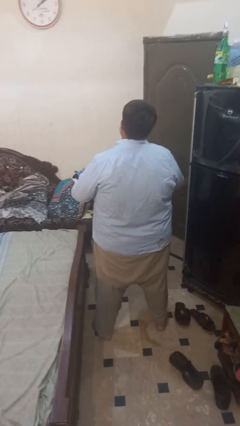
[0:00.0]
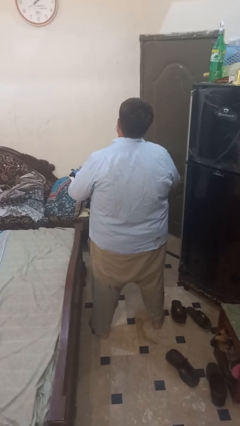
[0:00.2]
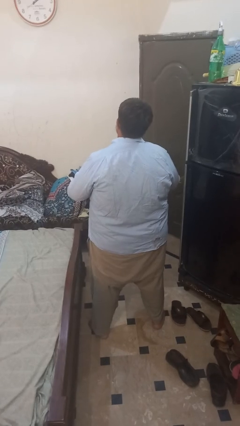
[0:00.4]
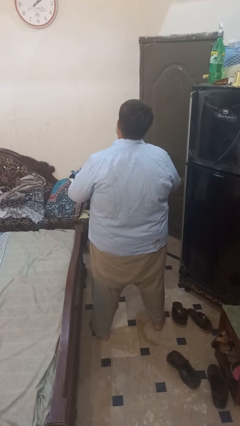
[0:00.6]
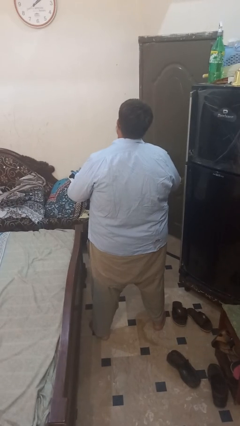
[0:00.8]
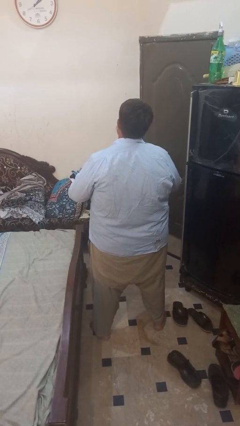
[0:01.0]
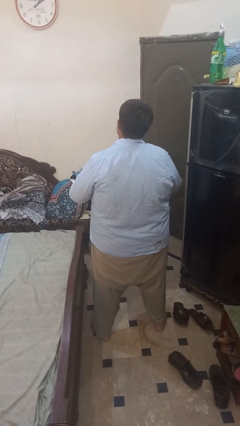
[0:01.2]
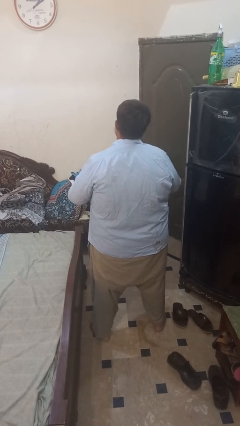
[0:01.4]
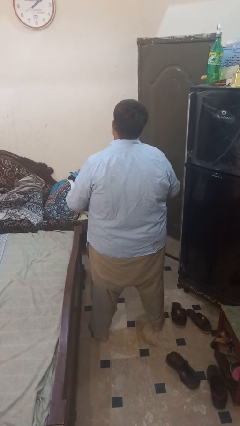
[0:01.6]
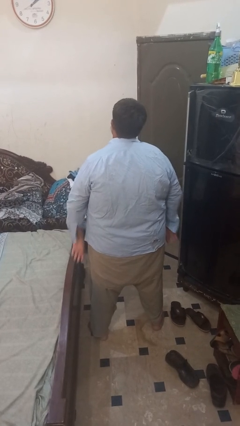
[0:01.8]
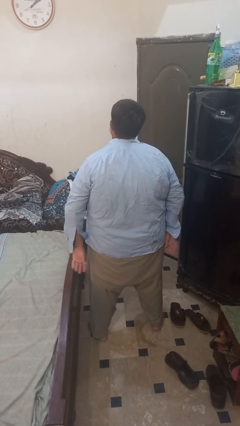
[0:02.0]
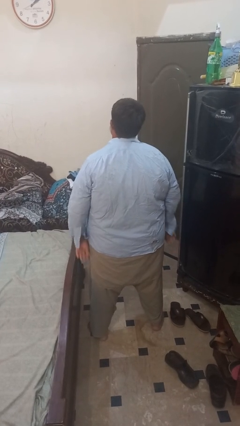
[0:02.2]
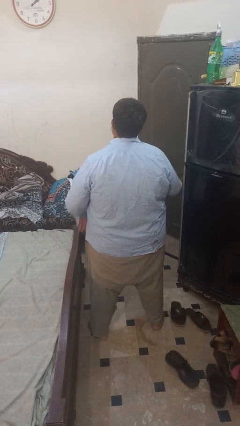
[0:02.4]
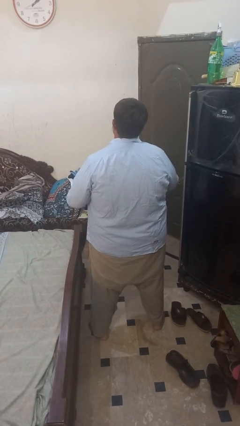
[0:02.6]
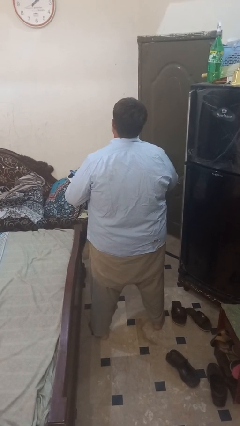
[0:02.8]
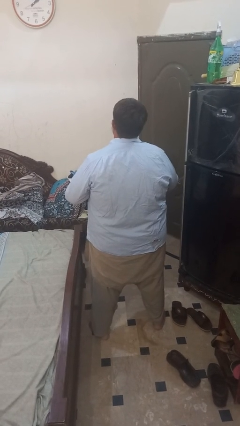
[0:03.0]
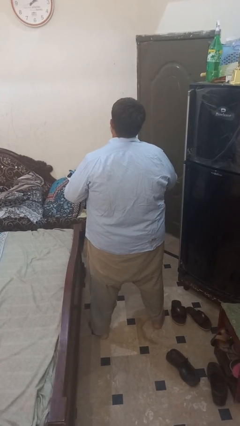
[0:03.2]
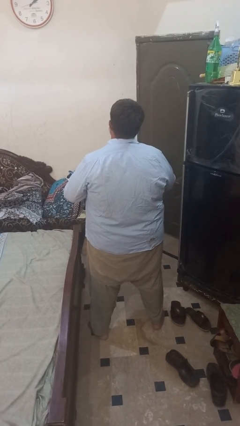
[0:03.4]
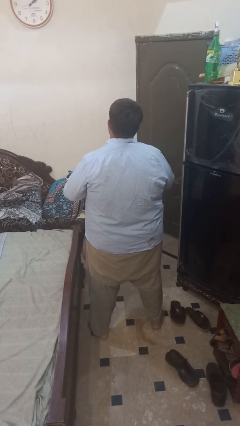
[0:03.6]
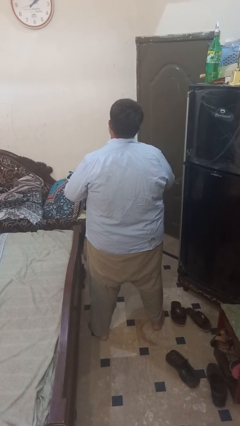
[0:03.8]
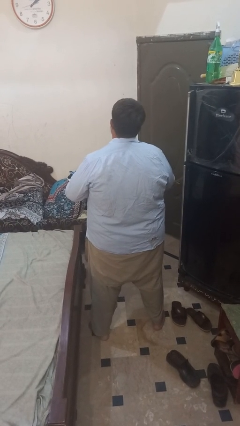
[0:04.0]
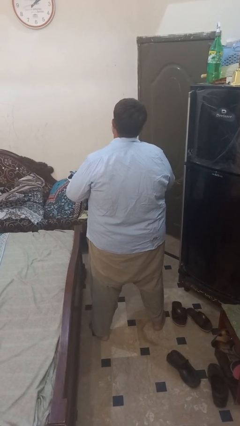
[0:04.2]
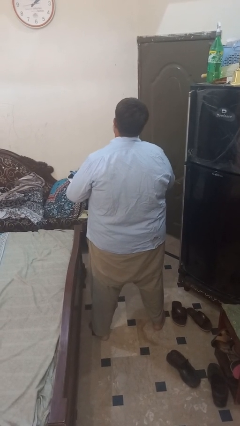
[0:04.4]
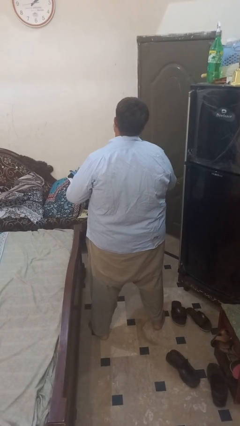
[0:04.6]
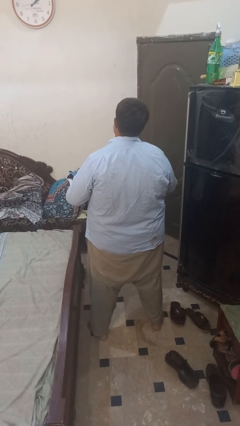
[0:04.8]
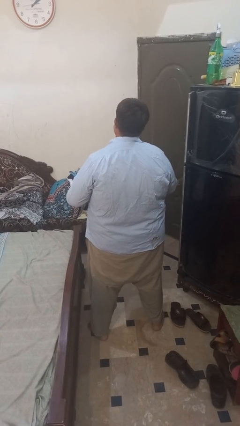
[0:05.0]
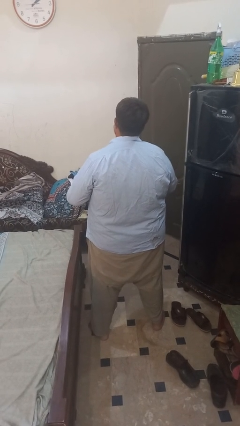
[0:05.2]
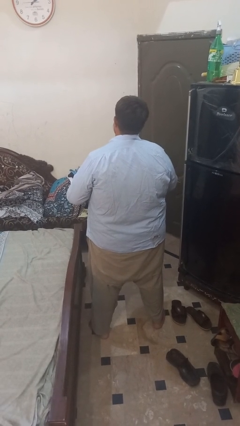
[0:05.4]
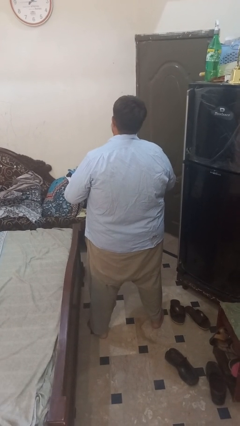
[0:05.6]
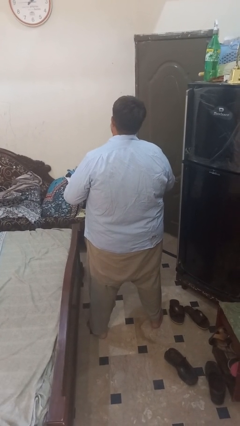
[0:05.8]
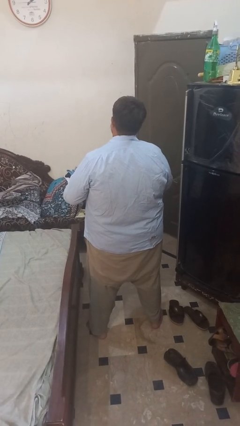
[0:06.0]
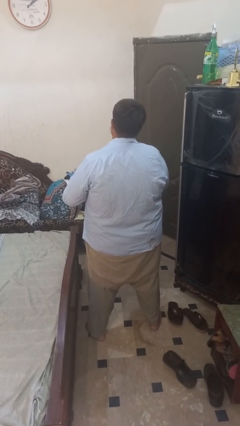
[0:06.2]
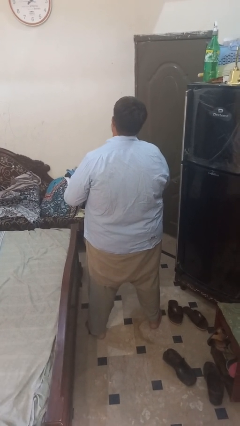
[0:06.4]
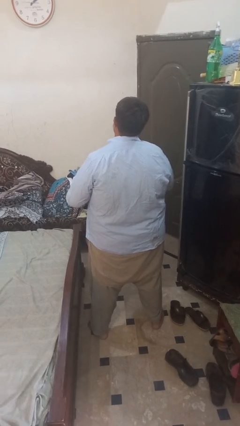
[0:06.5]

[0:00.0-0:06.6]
person unbuttons shirt

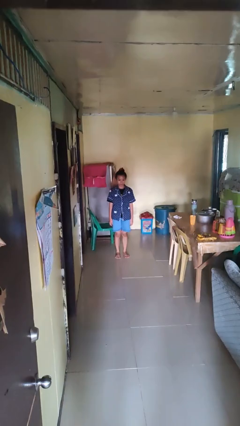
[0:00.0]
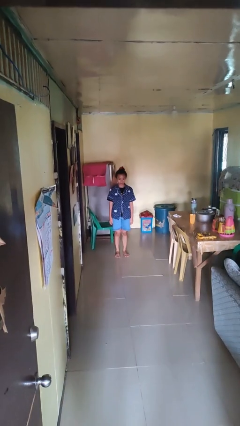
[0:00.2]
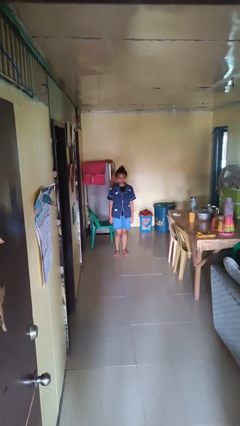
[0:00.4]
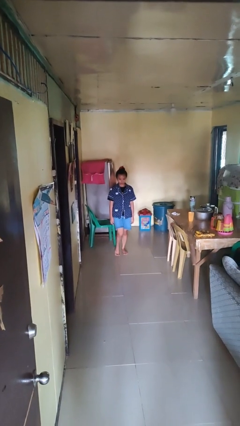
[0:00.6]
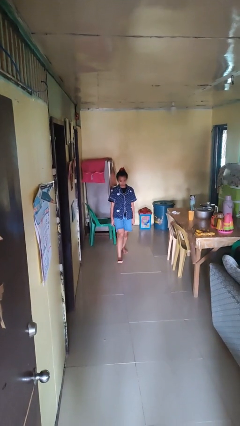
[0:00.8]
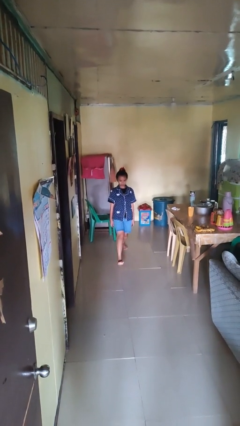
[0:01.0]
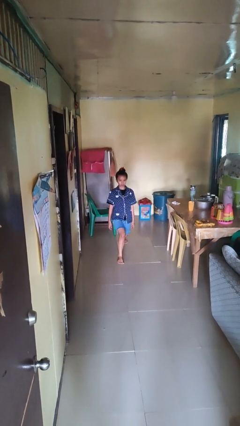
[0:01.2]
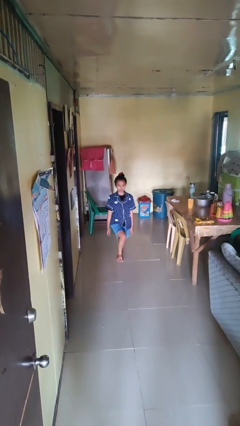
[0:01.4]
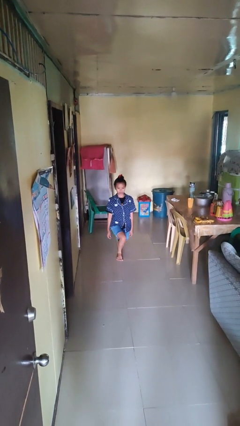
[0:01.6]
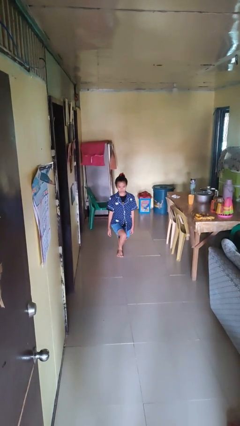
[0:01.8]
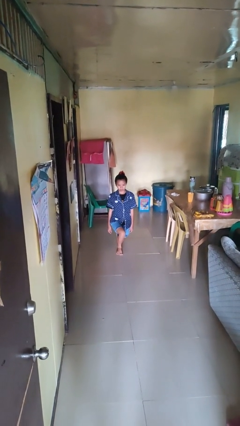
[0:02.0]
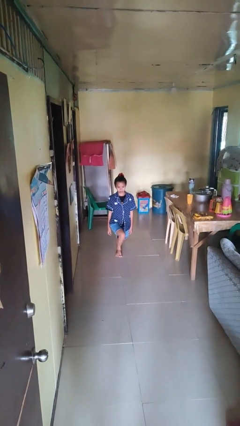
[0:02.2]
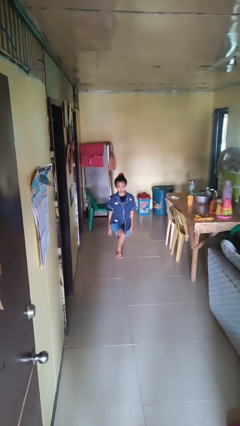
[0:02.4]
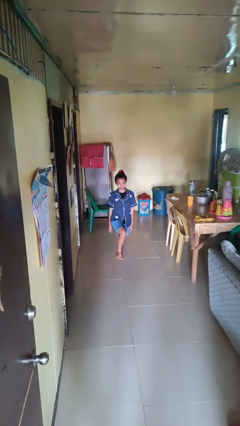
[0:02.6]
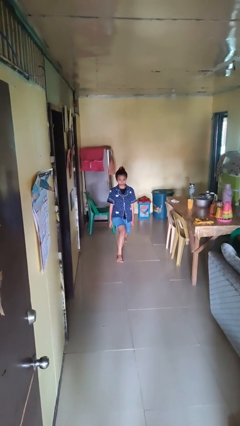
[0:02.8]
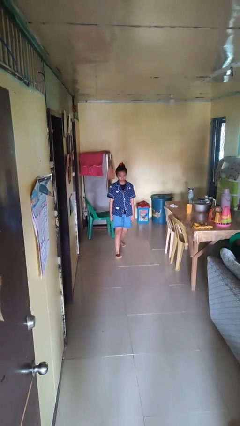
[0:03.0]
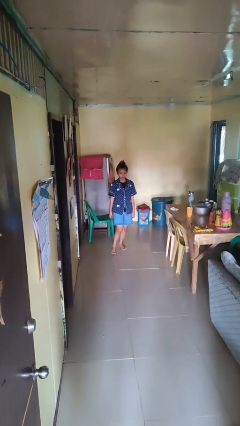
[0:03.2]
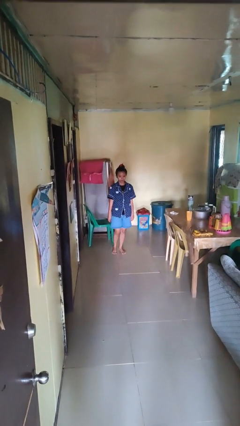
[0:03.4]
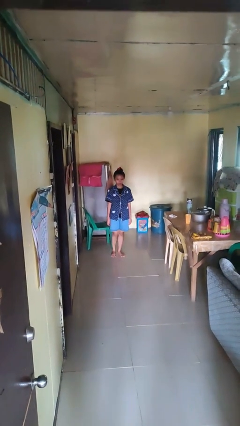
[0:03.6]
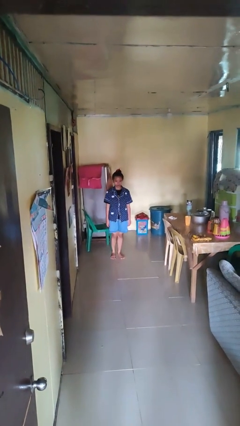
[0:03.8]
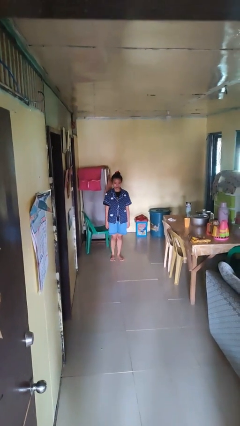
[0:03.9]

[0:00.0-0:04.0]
person exercises with lunges

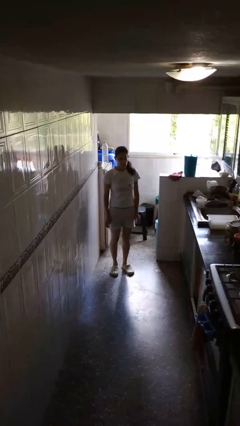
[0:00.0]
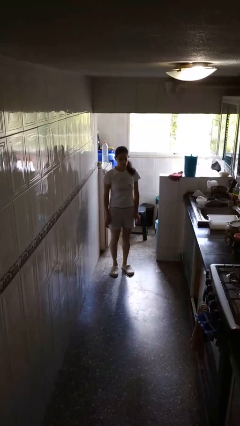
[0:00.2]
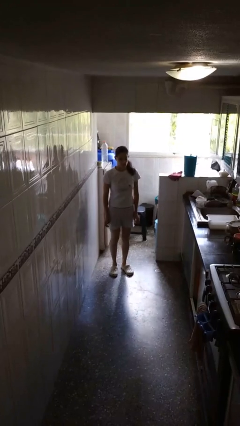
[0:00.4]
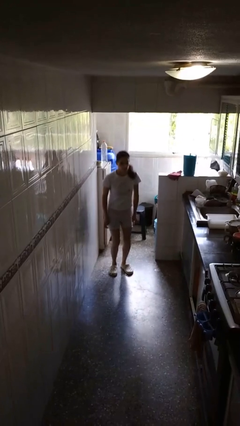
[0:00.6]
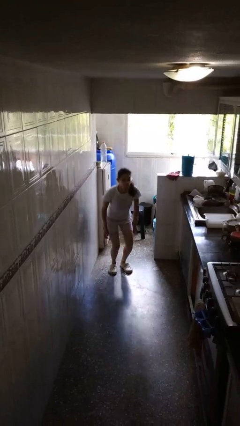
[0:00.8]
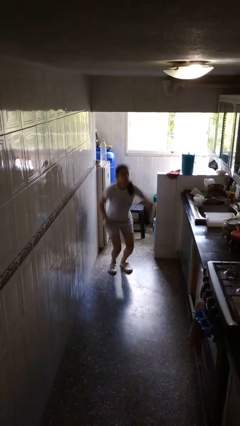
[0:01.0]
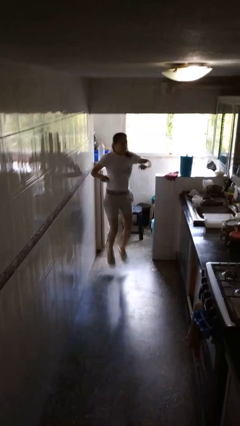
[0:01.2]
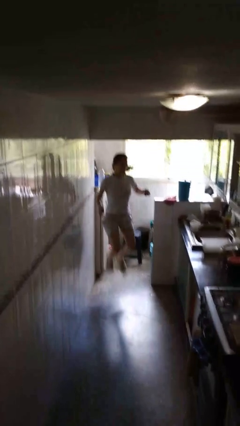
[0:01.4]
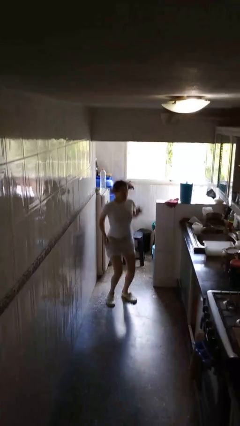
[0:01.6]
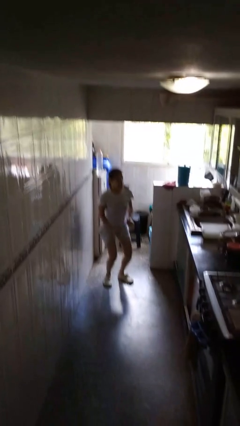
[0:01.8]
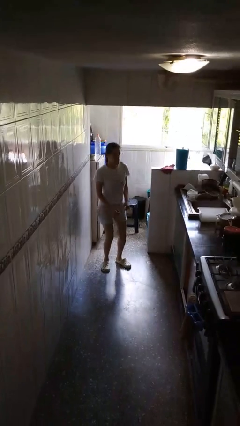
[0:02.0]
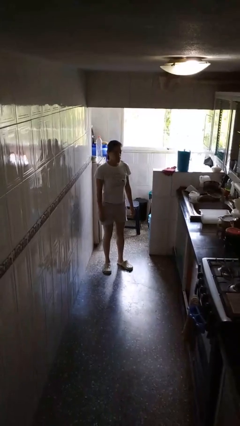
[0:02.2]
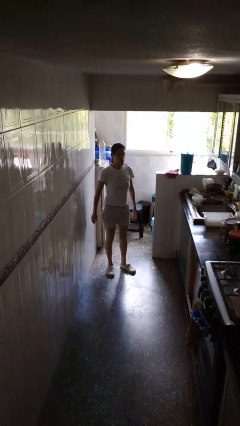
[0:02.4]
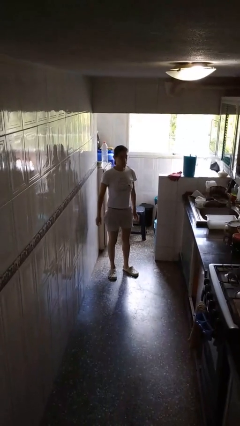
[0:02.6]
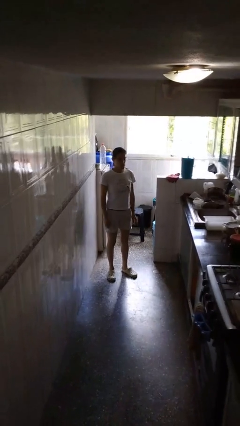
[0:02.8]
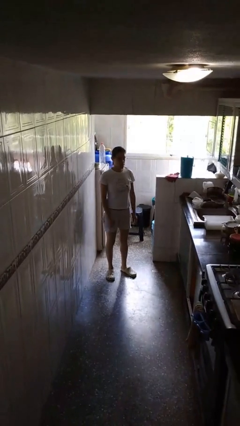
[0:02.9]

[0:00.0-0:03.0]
person jumps

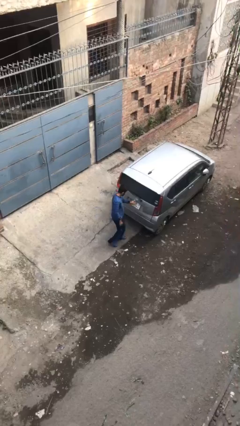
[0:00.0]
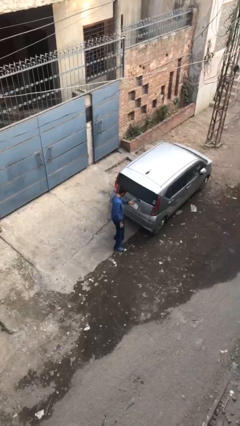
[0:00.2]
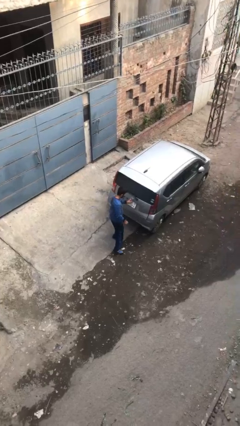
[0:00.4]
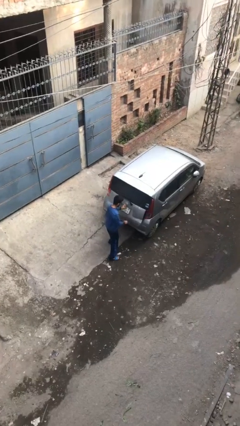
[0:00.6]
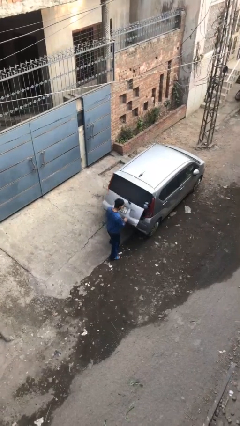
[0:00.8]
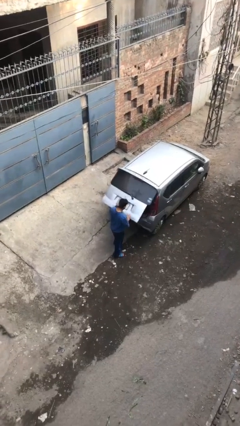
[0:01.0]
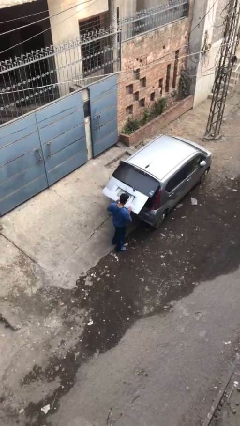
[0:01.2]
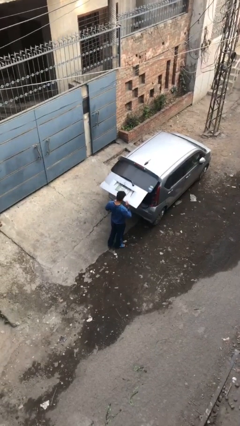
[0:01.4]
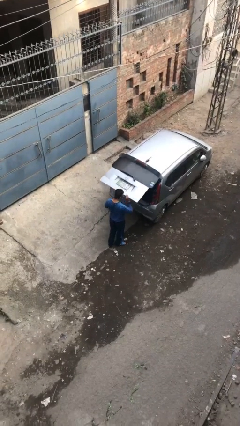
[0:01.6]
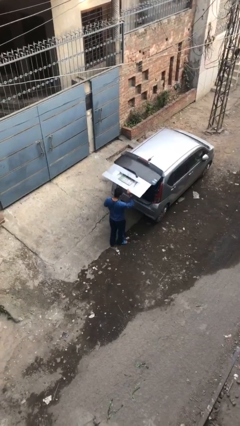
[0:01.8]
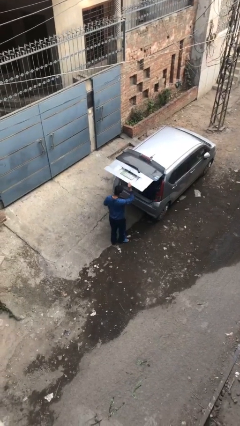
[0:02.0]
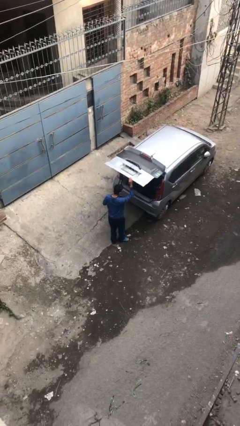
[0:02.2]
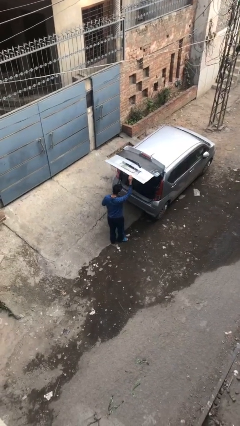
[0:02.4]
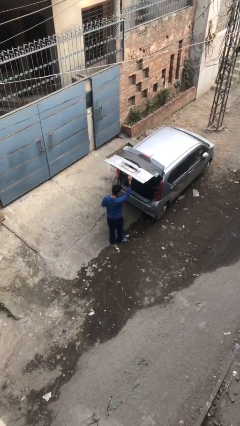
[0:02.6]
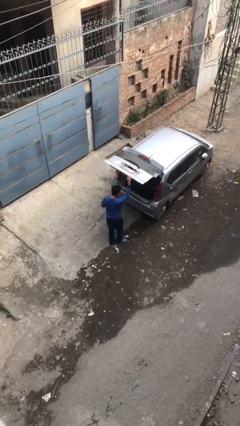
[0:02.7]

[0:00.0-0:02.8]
person opens car trunk

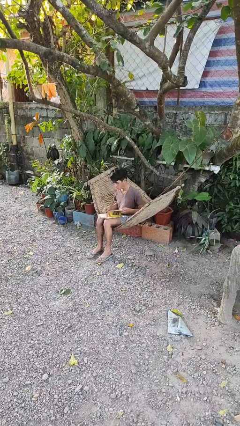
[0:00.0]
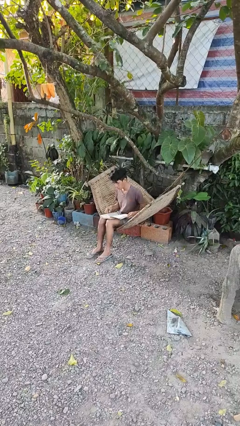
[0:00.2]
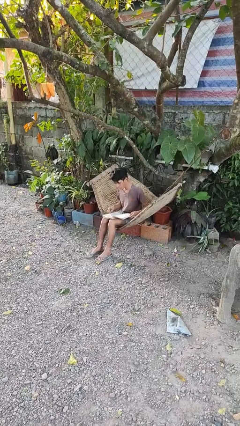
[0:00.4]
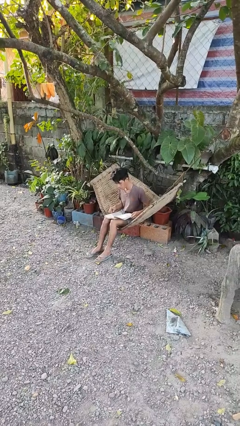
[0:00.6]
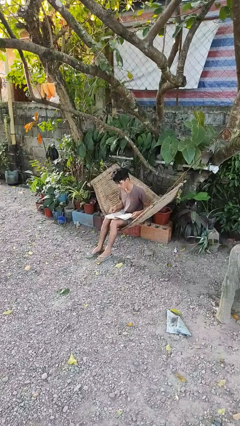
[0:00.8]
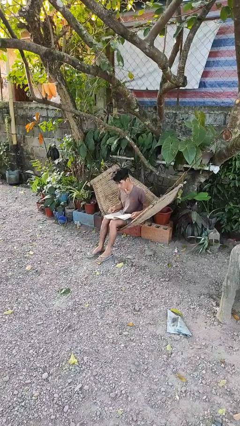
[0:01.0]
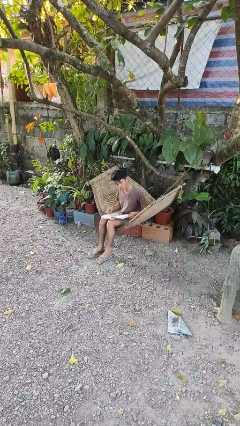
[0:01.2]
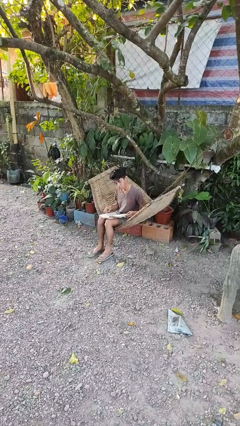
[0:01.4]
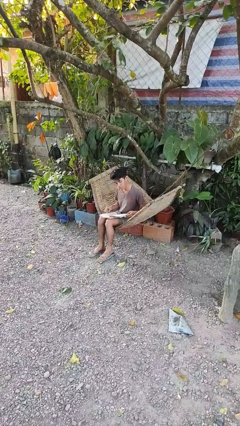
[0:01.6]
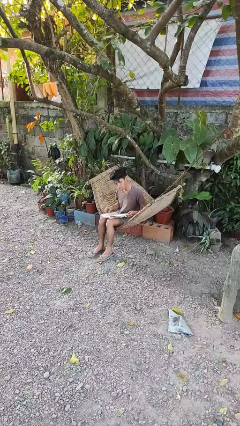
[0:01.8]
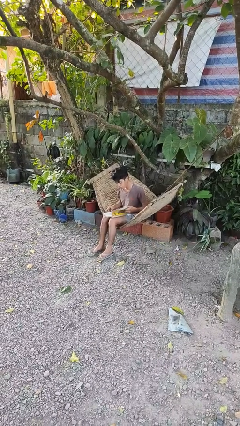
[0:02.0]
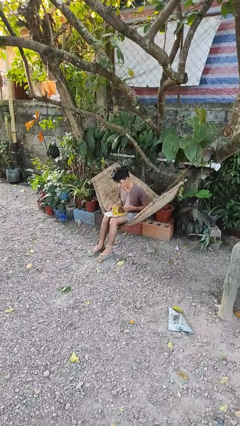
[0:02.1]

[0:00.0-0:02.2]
person reads book
